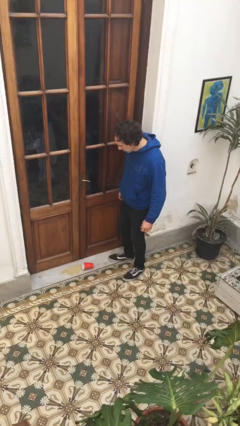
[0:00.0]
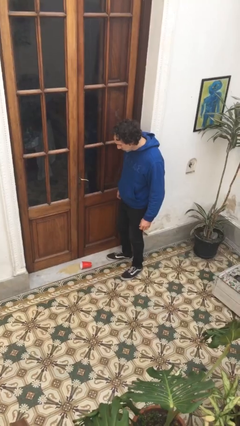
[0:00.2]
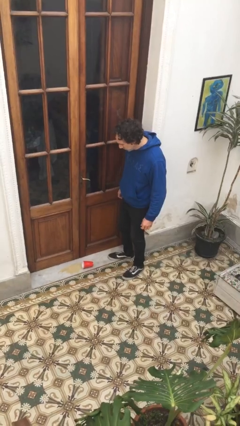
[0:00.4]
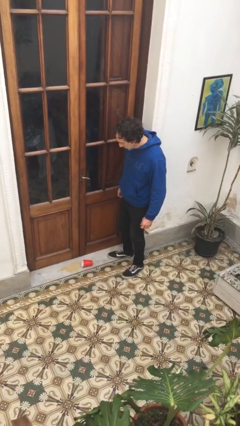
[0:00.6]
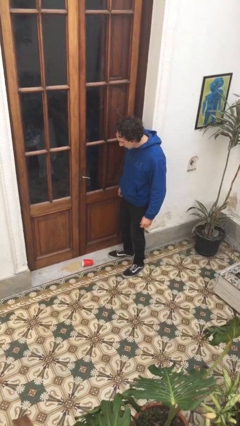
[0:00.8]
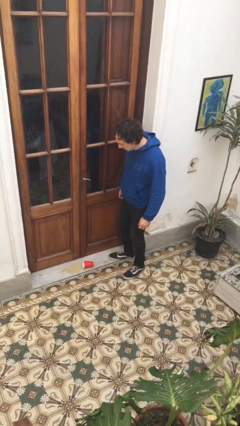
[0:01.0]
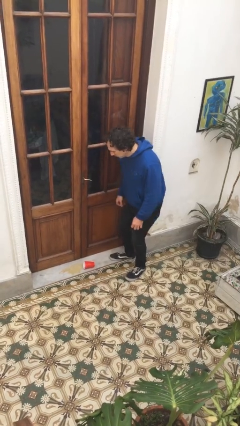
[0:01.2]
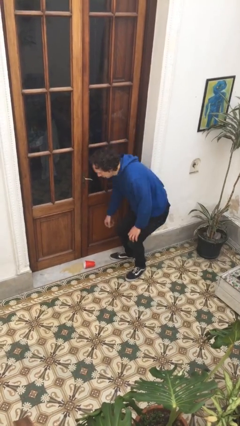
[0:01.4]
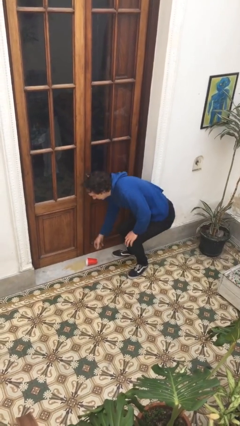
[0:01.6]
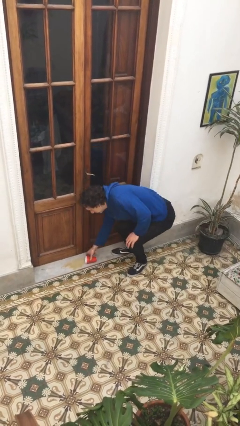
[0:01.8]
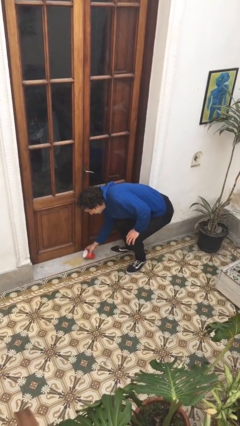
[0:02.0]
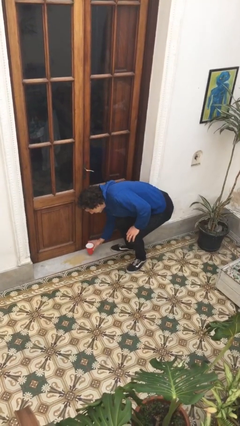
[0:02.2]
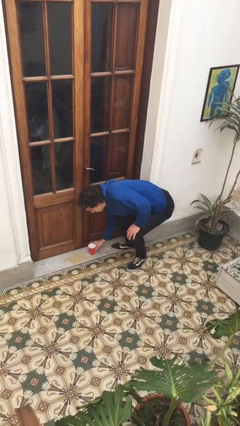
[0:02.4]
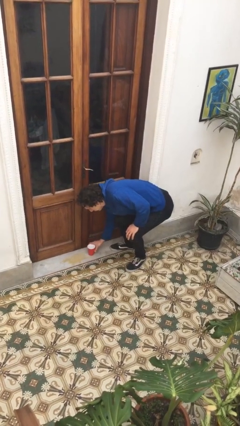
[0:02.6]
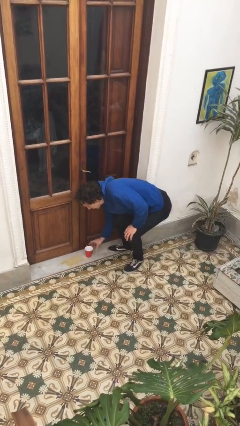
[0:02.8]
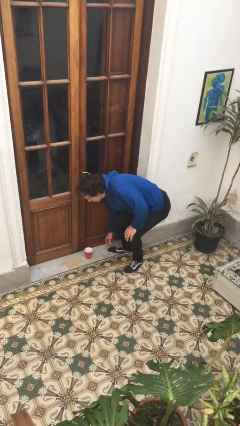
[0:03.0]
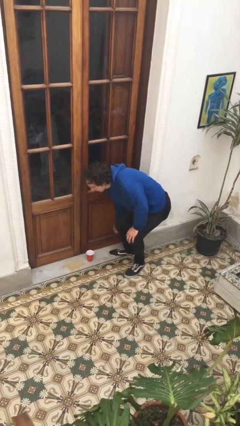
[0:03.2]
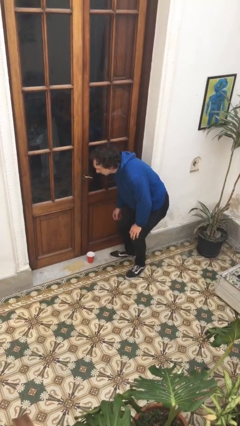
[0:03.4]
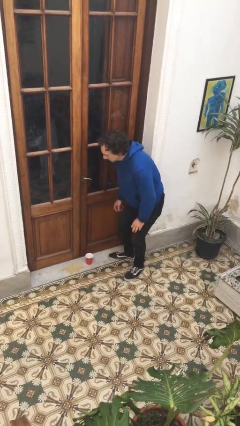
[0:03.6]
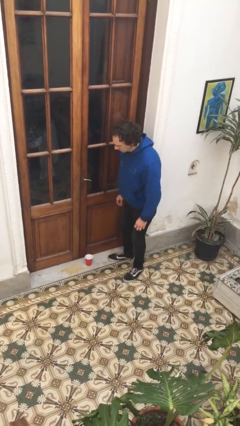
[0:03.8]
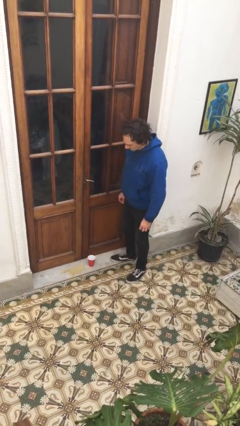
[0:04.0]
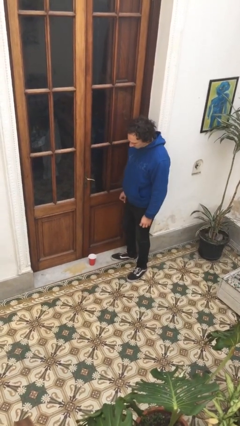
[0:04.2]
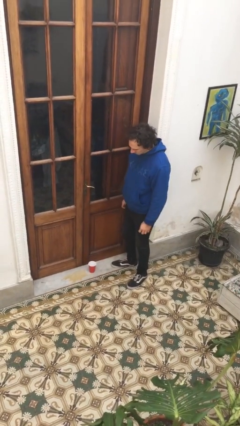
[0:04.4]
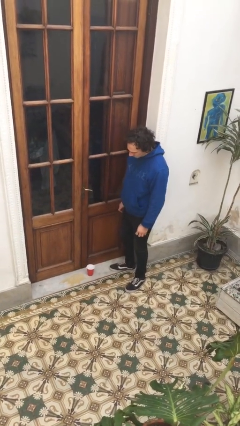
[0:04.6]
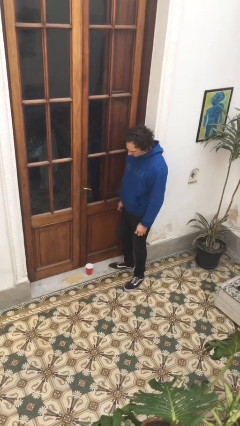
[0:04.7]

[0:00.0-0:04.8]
person sets upright glass

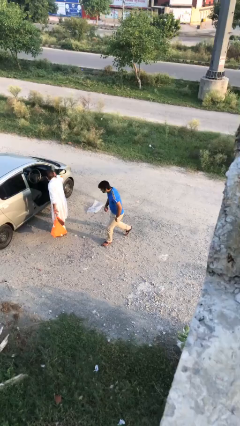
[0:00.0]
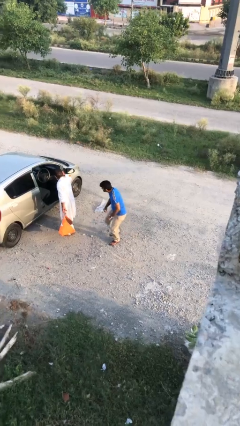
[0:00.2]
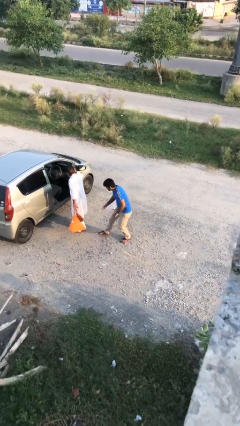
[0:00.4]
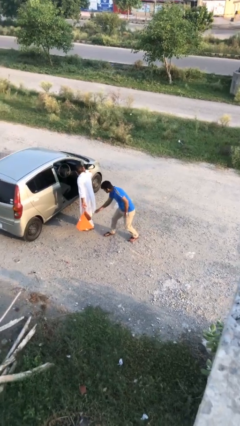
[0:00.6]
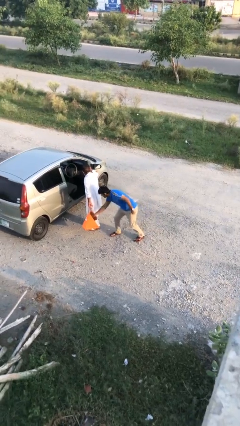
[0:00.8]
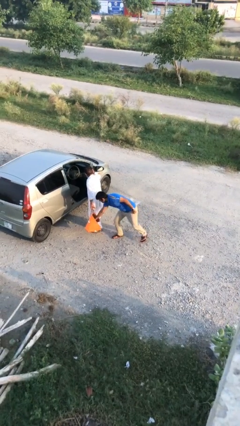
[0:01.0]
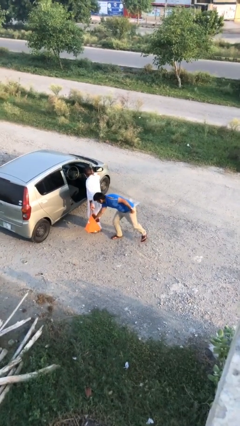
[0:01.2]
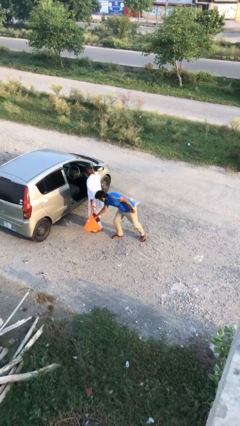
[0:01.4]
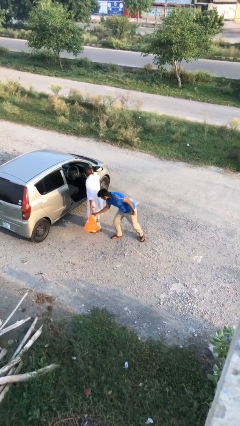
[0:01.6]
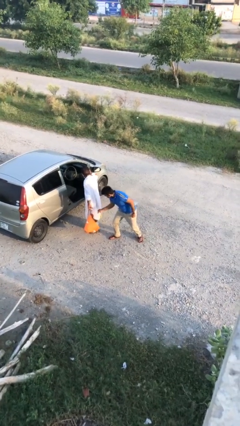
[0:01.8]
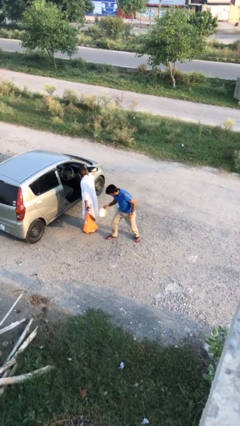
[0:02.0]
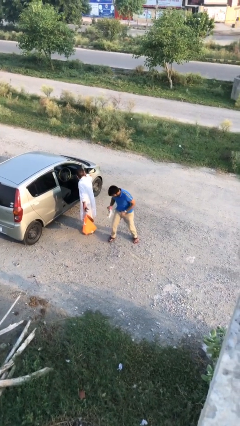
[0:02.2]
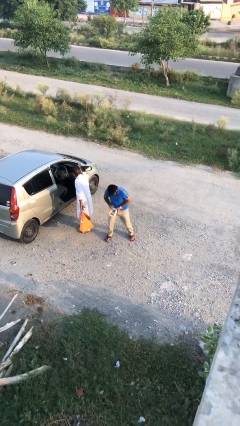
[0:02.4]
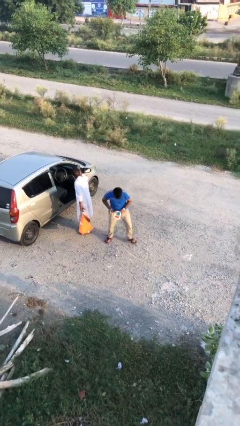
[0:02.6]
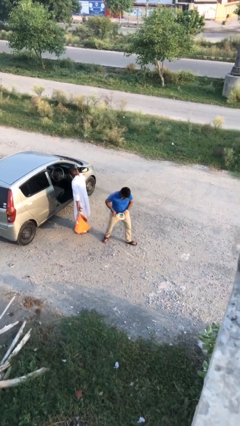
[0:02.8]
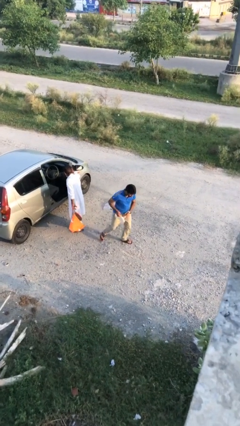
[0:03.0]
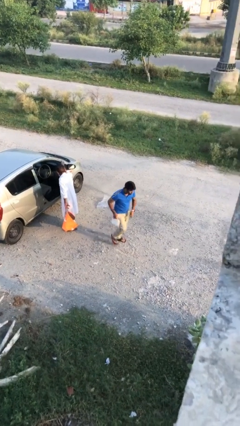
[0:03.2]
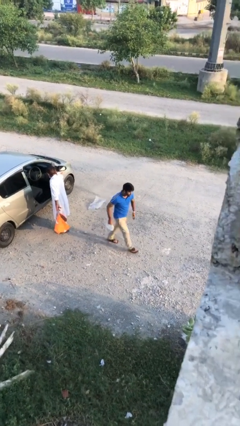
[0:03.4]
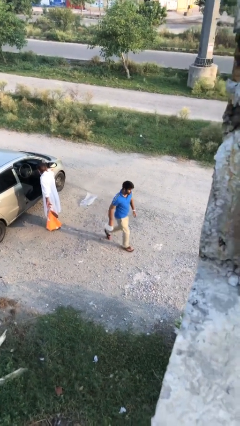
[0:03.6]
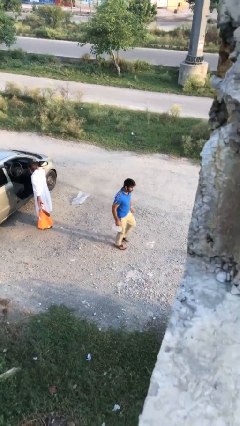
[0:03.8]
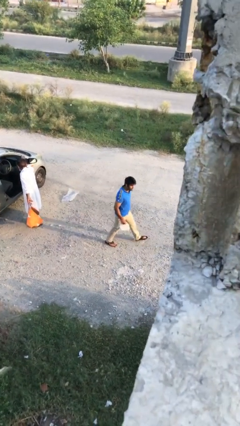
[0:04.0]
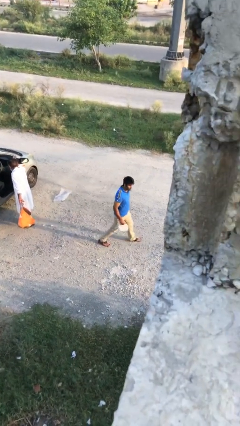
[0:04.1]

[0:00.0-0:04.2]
person steals object from person

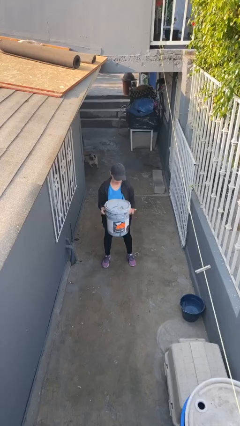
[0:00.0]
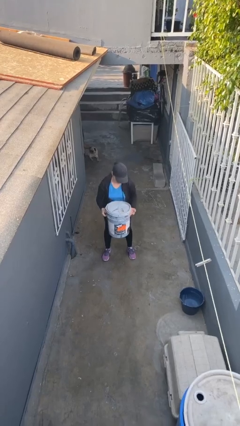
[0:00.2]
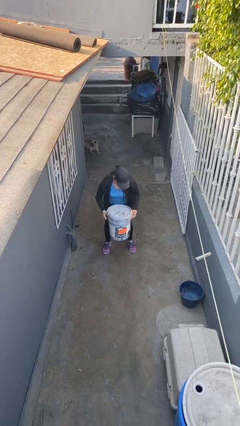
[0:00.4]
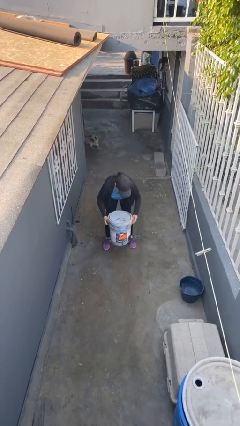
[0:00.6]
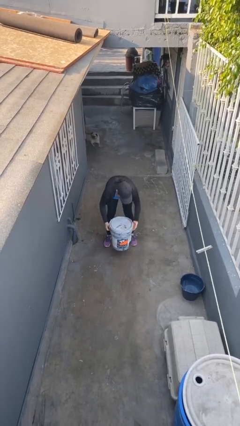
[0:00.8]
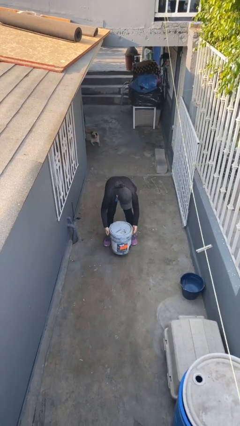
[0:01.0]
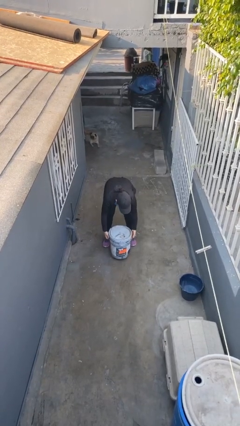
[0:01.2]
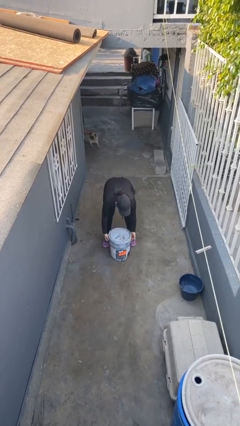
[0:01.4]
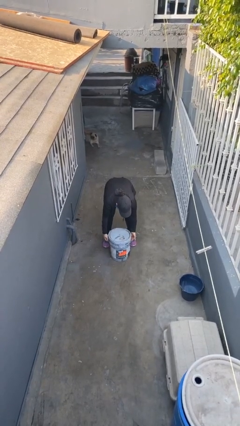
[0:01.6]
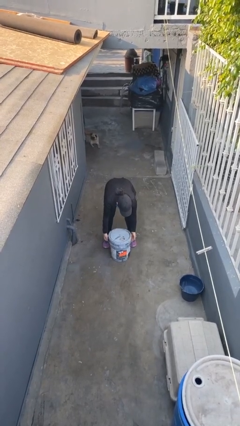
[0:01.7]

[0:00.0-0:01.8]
person puts down object on floor

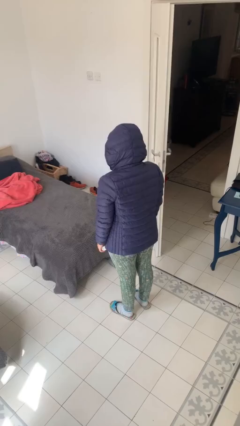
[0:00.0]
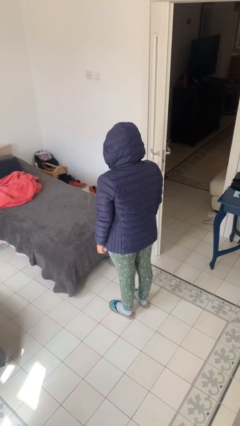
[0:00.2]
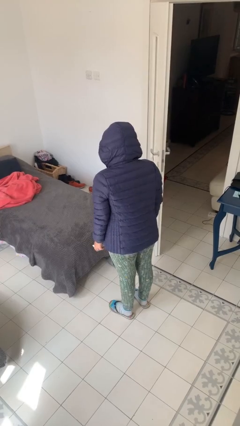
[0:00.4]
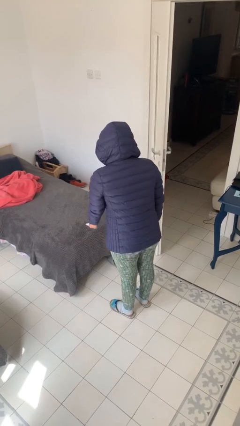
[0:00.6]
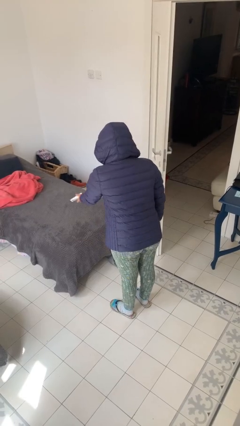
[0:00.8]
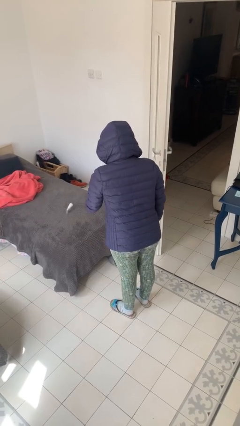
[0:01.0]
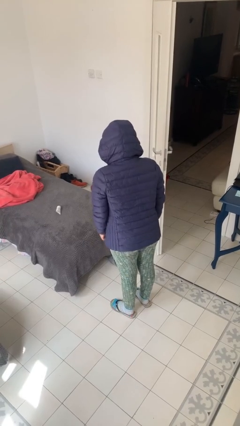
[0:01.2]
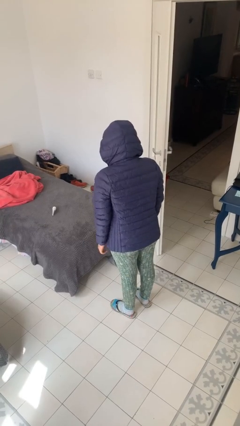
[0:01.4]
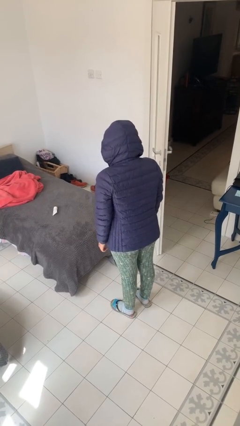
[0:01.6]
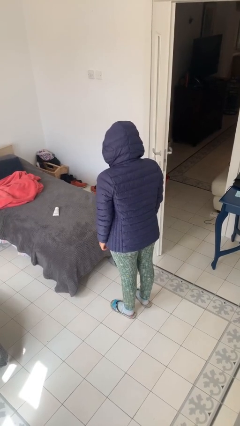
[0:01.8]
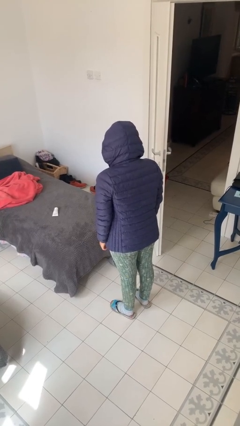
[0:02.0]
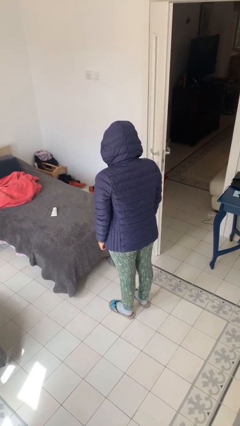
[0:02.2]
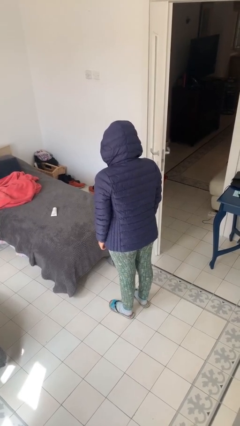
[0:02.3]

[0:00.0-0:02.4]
person throws object on bed

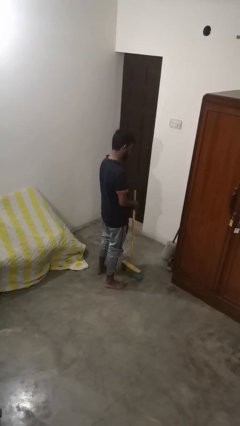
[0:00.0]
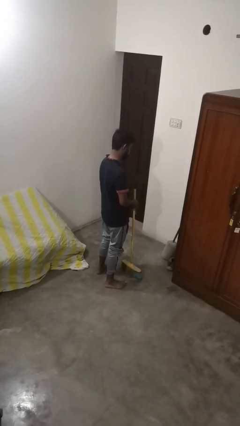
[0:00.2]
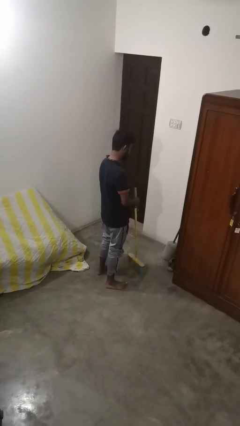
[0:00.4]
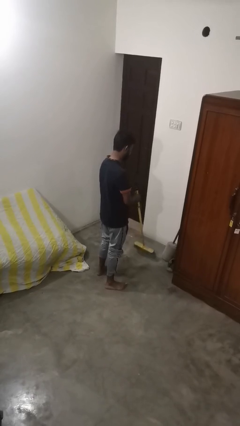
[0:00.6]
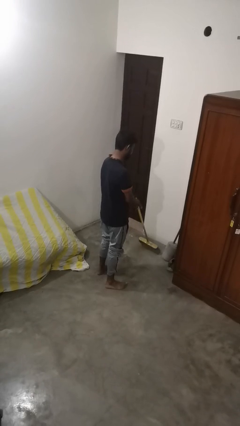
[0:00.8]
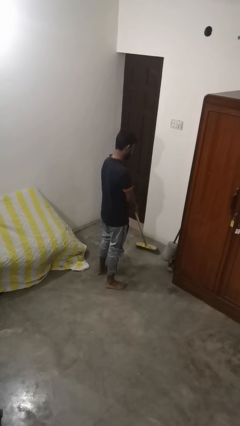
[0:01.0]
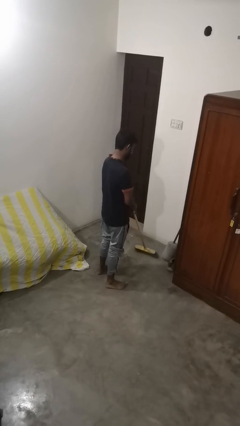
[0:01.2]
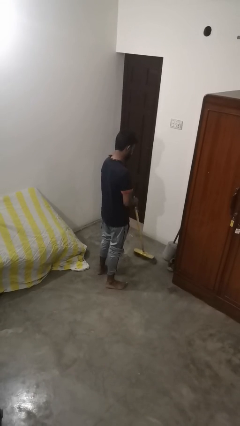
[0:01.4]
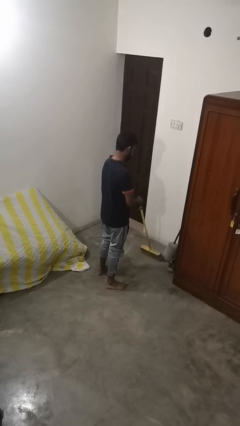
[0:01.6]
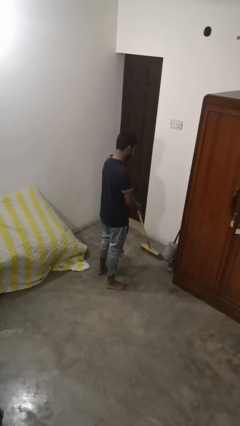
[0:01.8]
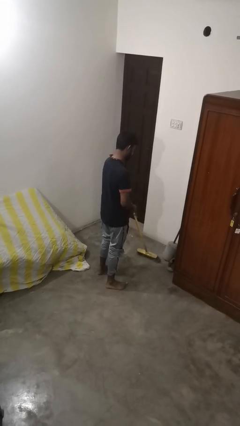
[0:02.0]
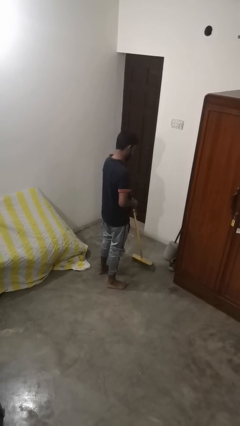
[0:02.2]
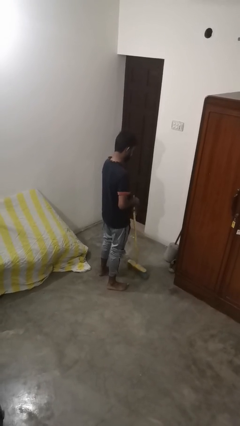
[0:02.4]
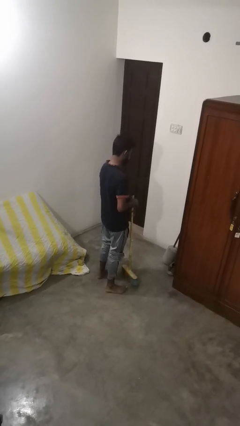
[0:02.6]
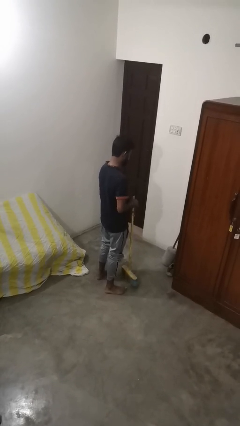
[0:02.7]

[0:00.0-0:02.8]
person sweeps floor

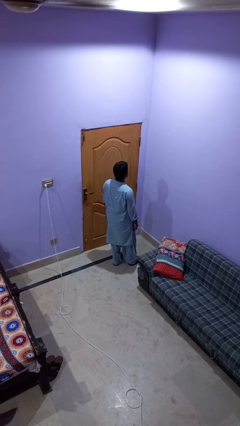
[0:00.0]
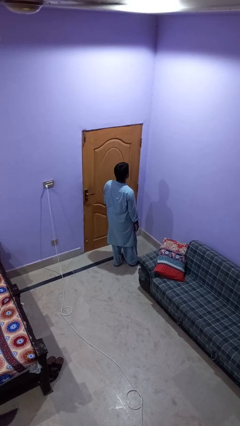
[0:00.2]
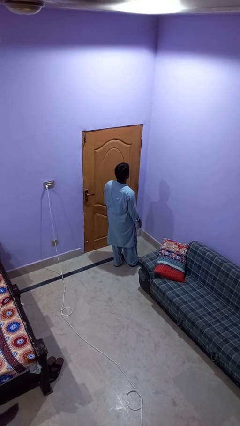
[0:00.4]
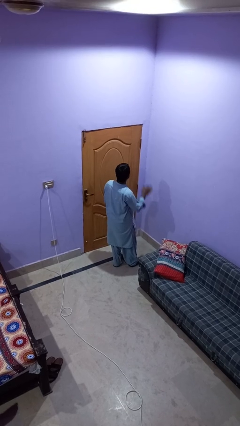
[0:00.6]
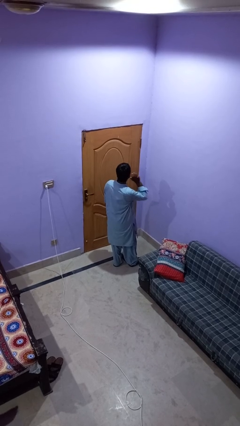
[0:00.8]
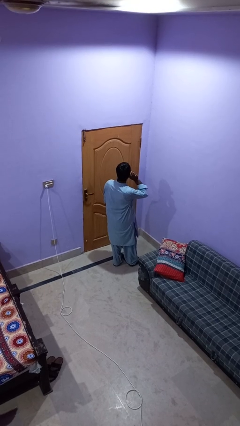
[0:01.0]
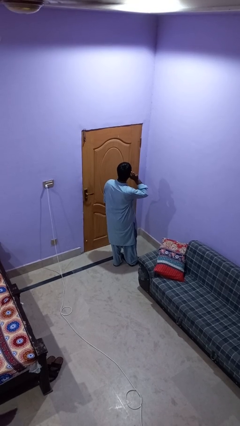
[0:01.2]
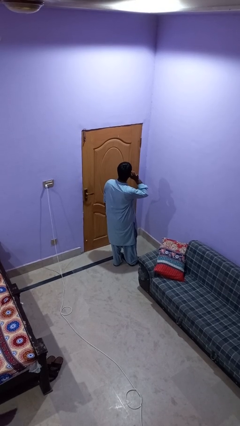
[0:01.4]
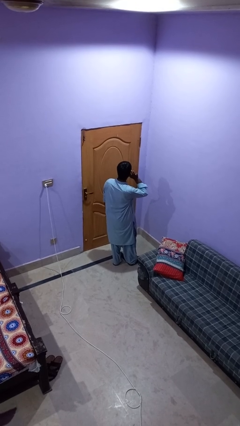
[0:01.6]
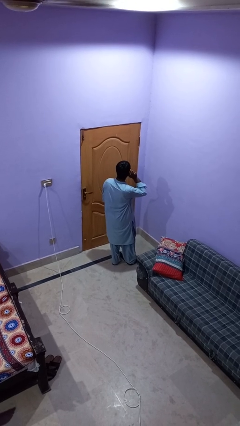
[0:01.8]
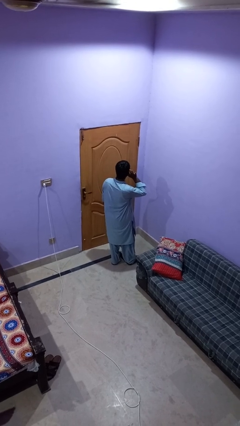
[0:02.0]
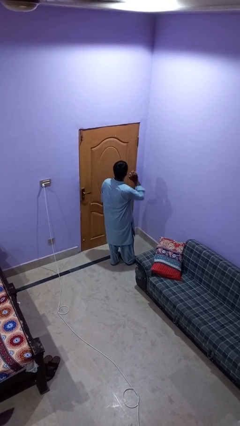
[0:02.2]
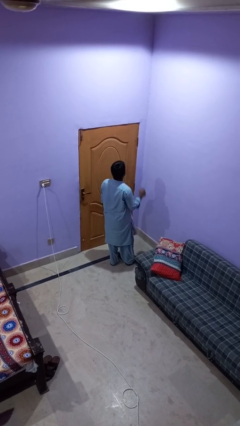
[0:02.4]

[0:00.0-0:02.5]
person gestures listen closely
